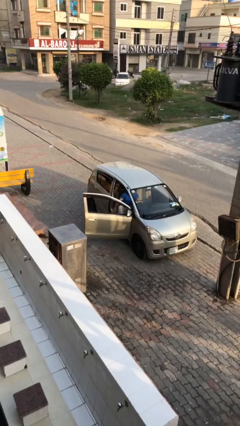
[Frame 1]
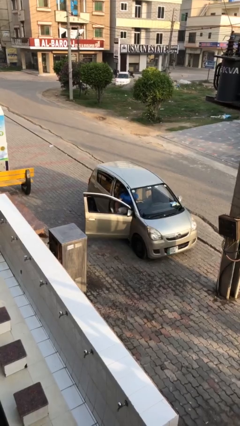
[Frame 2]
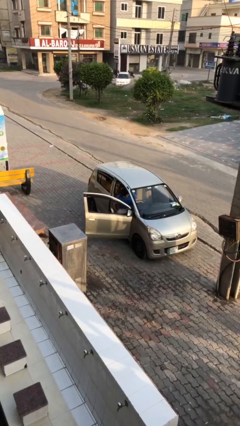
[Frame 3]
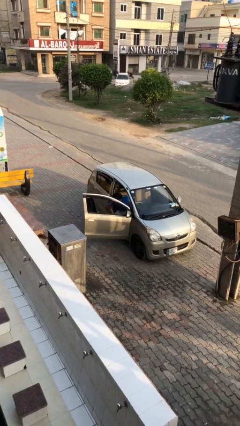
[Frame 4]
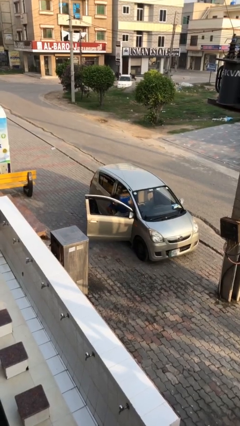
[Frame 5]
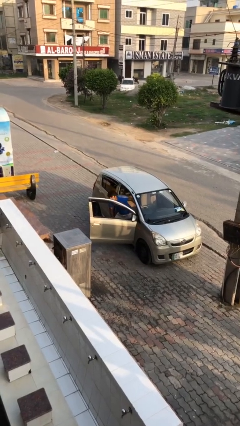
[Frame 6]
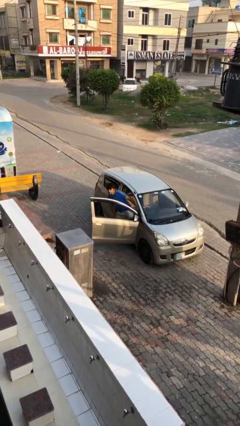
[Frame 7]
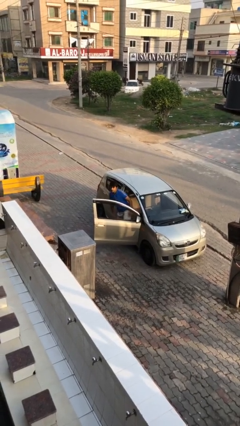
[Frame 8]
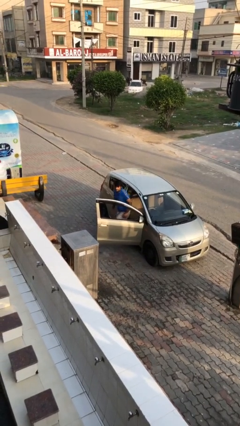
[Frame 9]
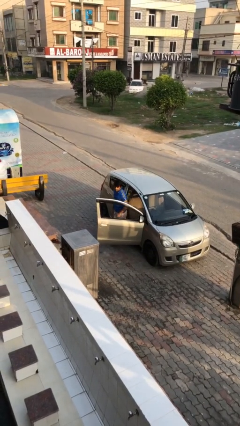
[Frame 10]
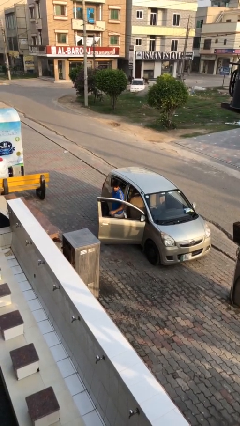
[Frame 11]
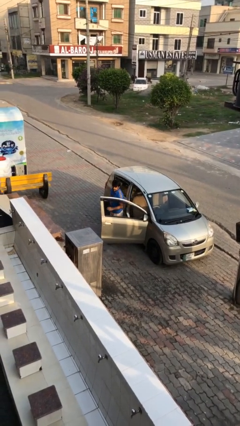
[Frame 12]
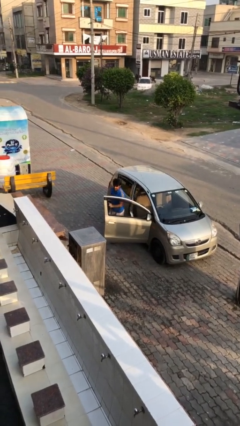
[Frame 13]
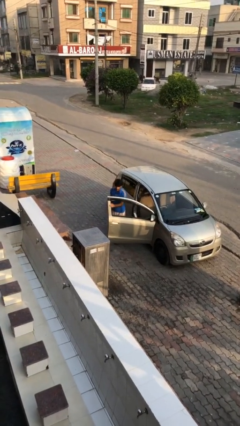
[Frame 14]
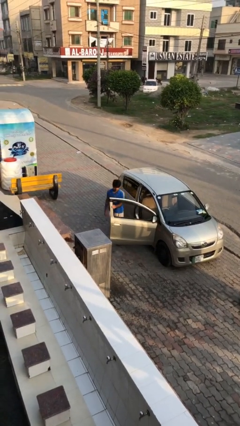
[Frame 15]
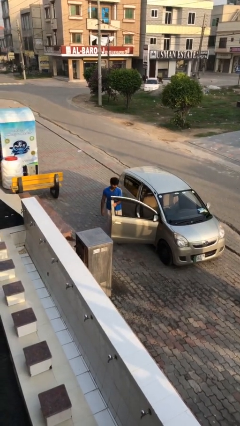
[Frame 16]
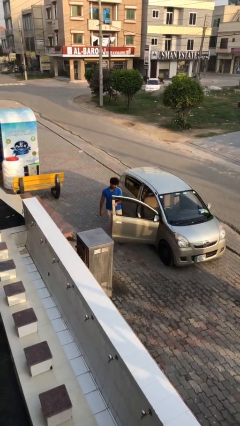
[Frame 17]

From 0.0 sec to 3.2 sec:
person exits car

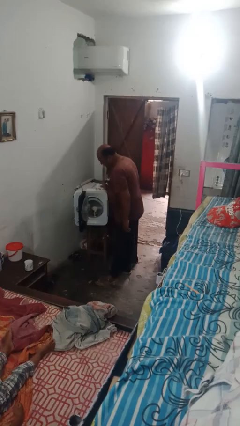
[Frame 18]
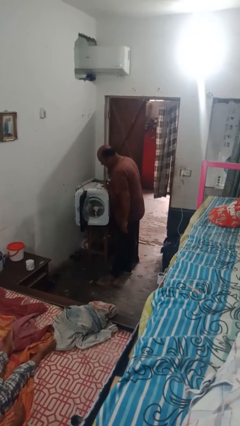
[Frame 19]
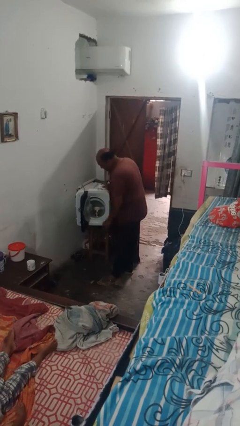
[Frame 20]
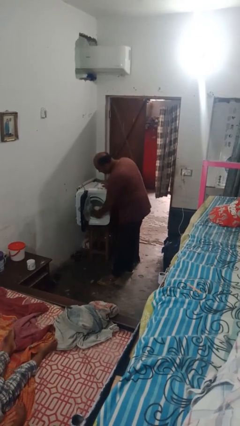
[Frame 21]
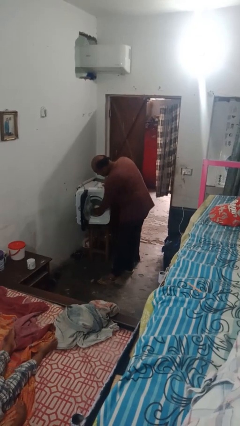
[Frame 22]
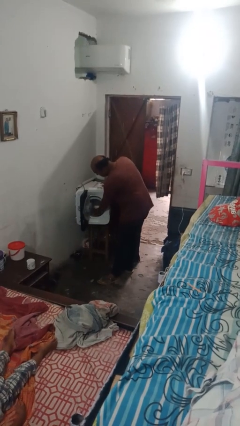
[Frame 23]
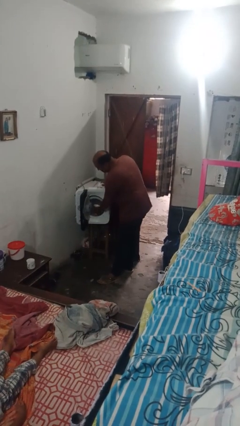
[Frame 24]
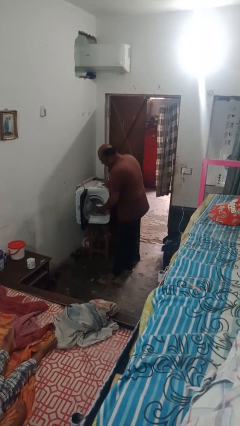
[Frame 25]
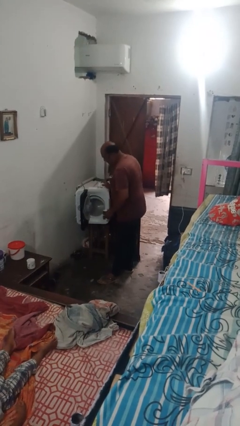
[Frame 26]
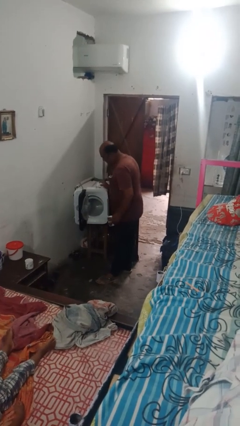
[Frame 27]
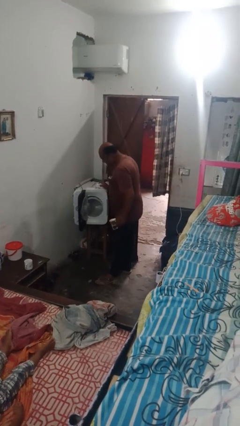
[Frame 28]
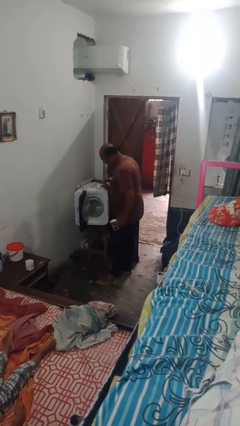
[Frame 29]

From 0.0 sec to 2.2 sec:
person unloads dishwasher

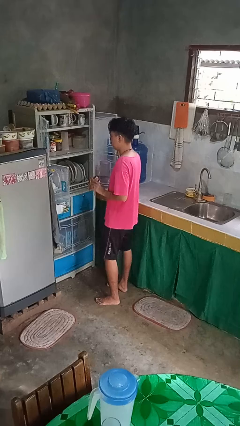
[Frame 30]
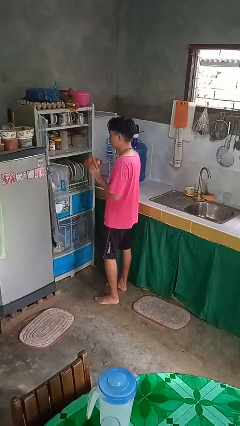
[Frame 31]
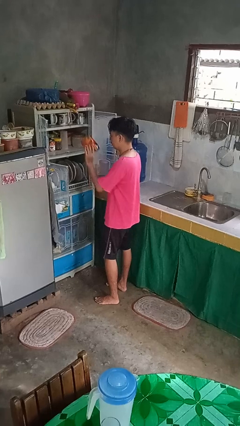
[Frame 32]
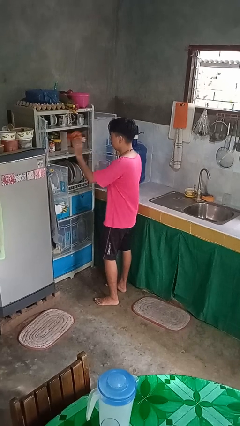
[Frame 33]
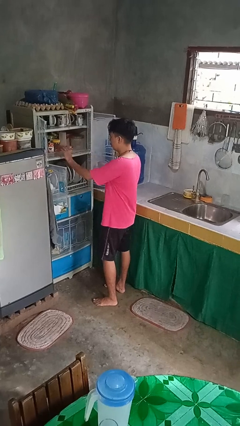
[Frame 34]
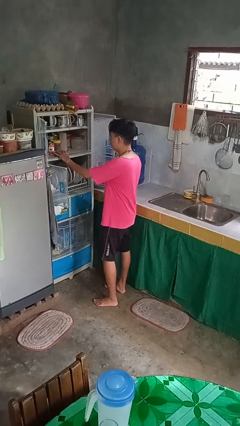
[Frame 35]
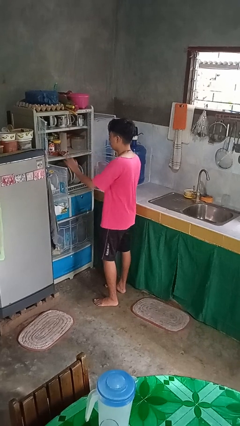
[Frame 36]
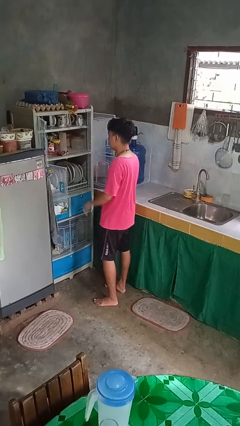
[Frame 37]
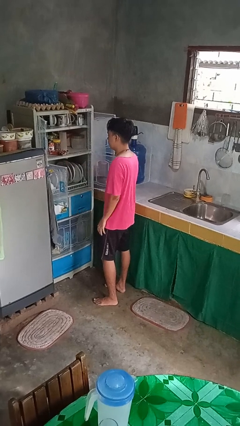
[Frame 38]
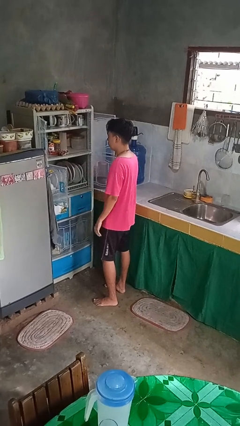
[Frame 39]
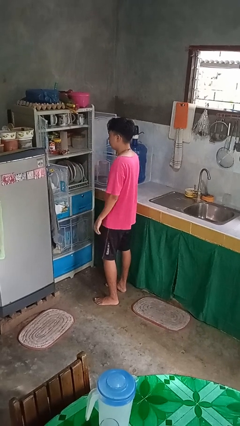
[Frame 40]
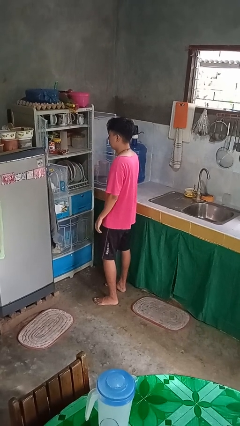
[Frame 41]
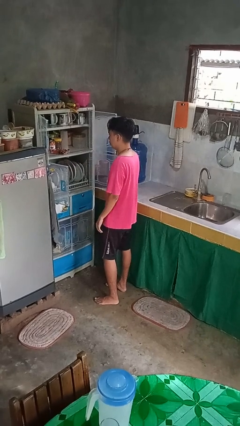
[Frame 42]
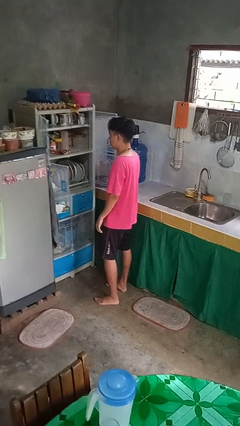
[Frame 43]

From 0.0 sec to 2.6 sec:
person puts object in cabinet

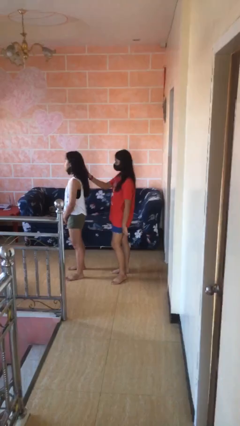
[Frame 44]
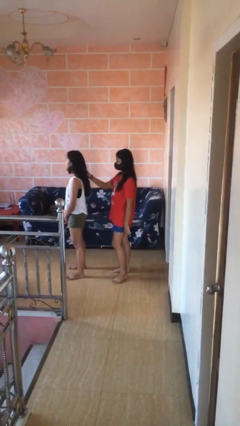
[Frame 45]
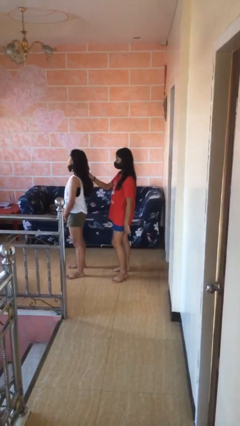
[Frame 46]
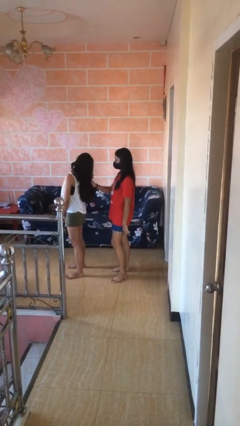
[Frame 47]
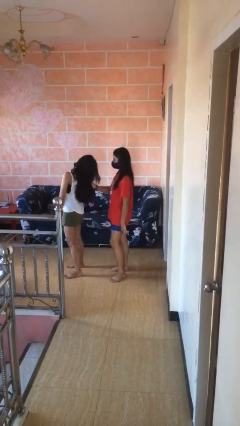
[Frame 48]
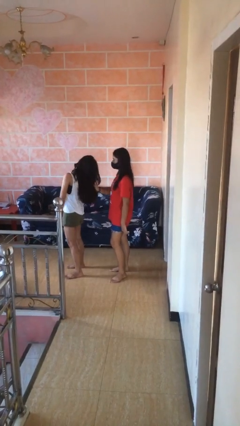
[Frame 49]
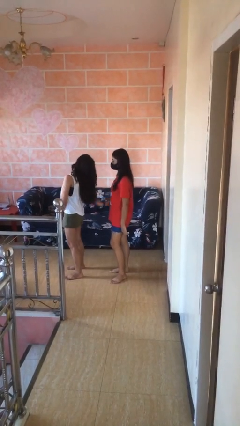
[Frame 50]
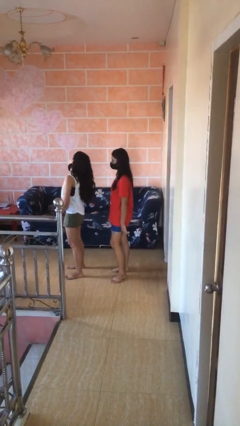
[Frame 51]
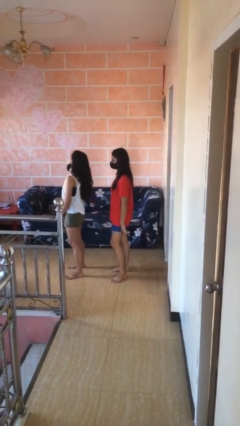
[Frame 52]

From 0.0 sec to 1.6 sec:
person grabs person by hair

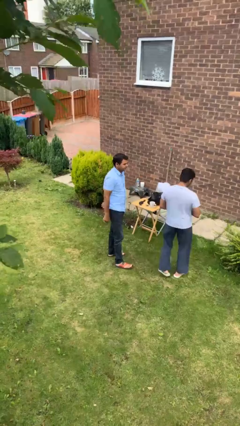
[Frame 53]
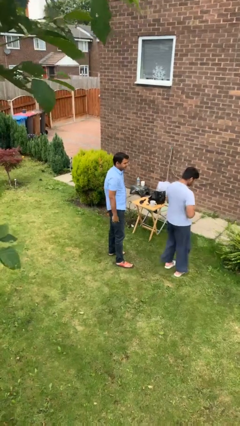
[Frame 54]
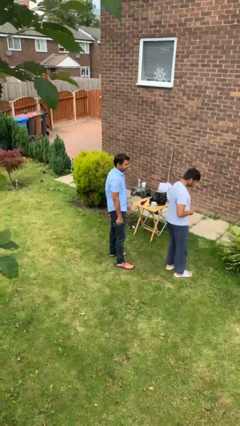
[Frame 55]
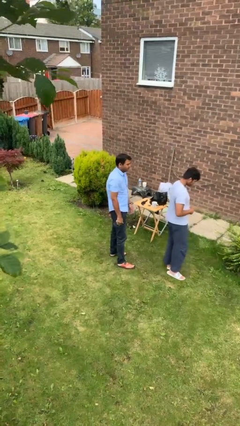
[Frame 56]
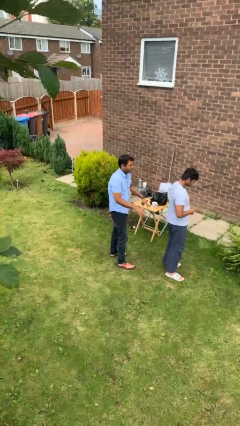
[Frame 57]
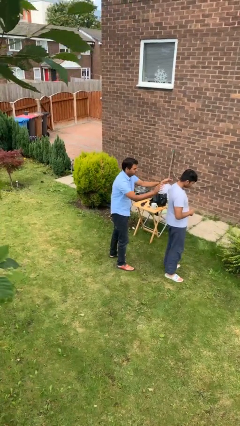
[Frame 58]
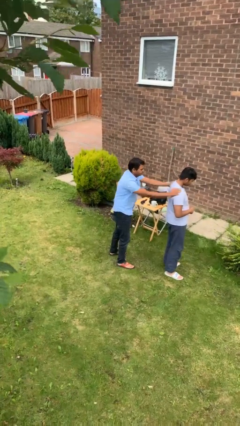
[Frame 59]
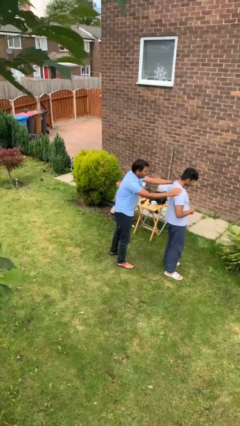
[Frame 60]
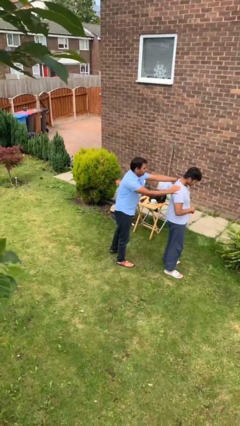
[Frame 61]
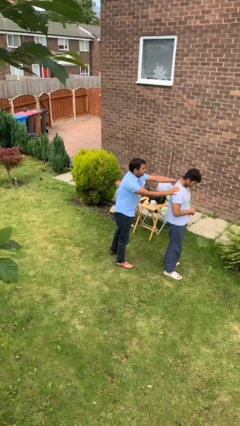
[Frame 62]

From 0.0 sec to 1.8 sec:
person grabs person by shoulder

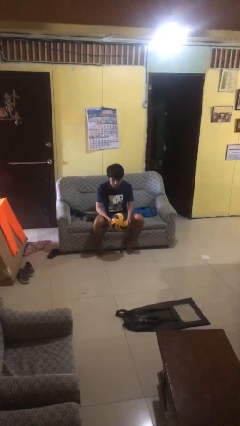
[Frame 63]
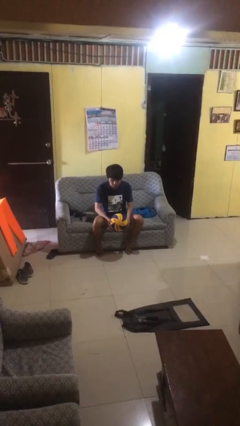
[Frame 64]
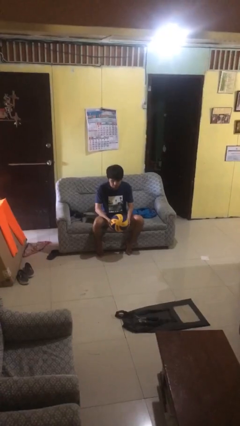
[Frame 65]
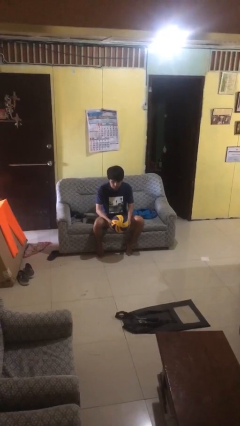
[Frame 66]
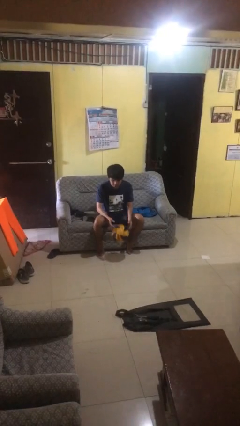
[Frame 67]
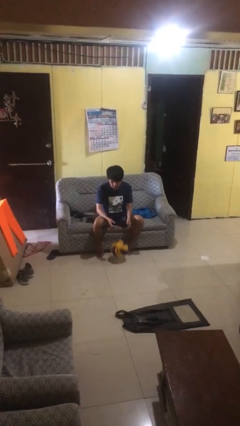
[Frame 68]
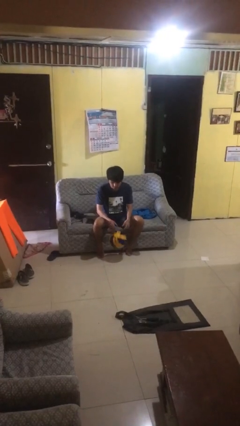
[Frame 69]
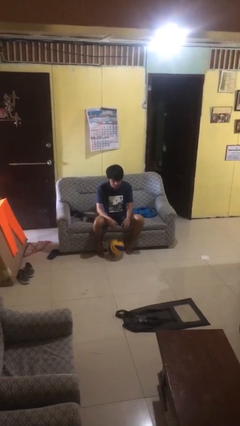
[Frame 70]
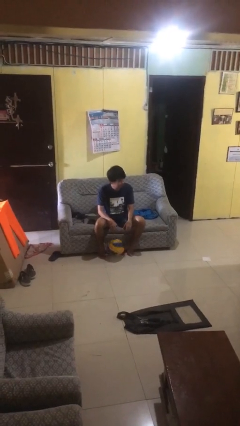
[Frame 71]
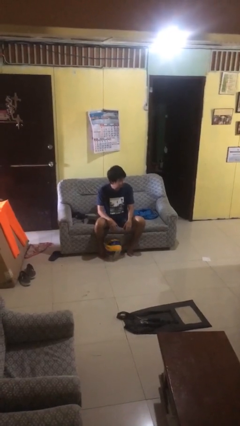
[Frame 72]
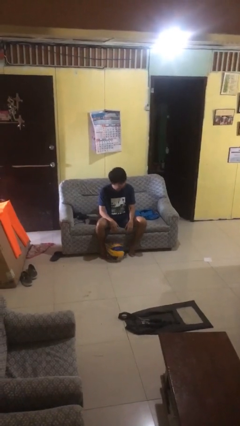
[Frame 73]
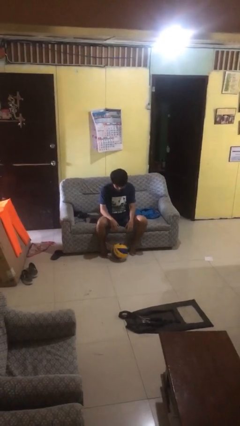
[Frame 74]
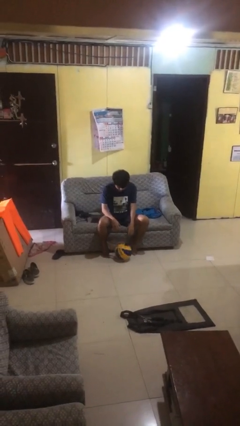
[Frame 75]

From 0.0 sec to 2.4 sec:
person drops object

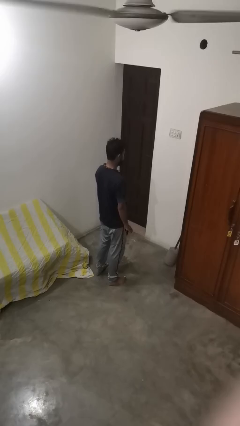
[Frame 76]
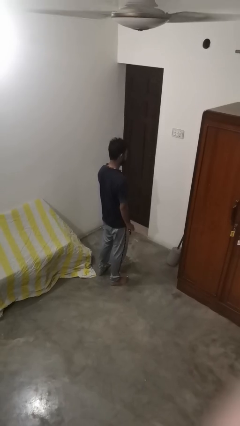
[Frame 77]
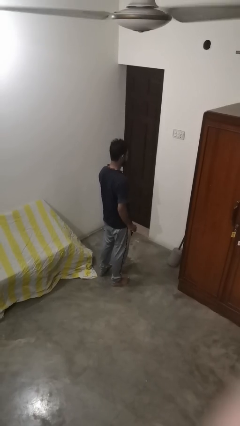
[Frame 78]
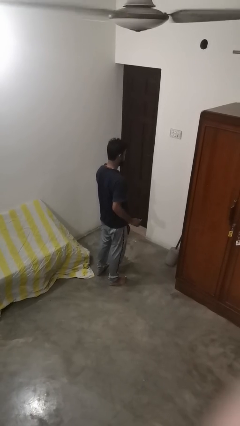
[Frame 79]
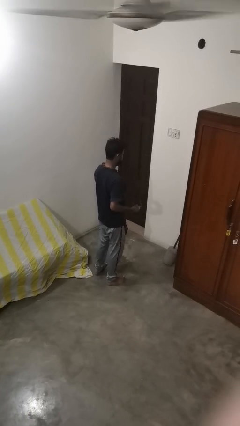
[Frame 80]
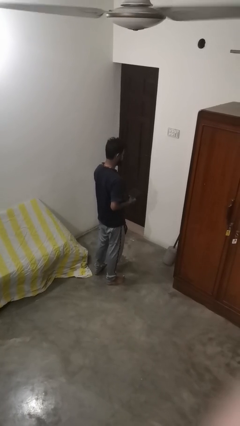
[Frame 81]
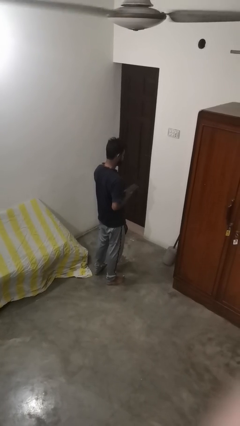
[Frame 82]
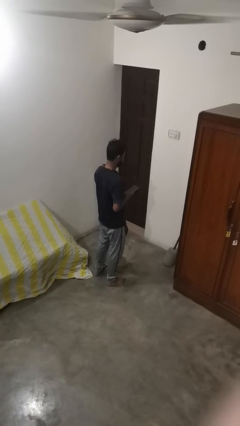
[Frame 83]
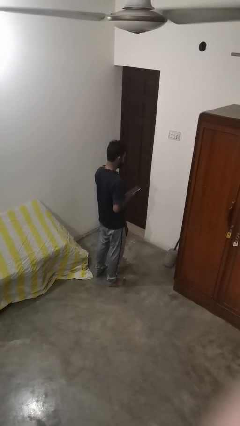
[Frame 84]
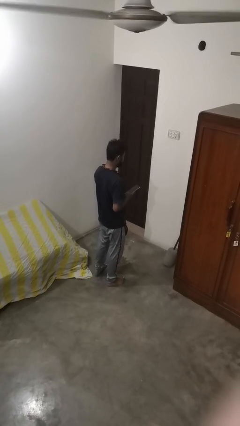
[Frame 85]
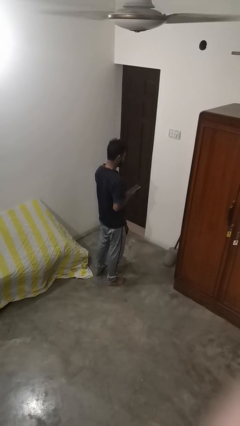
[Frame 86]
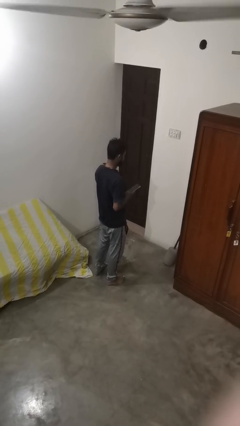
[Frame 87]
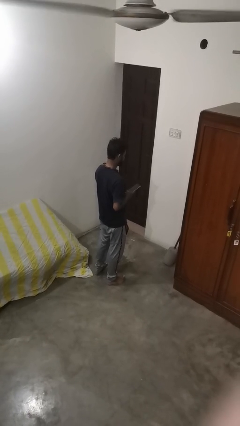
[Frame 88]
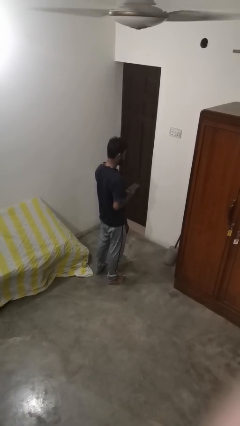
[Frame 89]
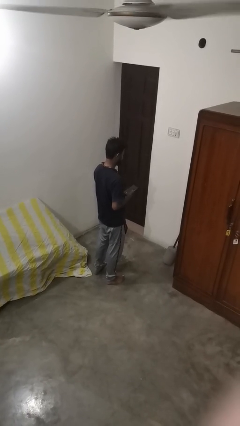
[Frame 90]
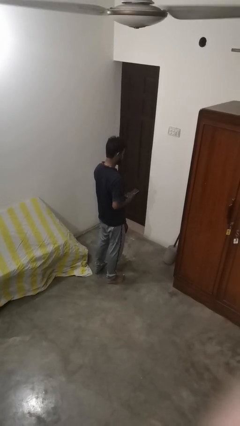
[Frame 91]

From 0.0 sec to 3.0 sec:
person takes phone from pocket
